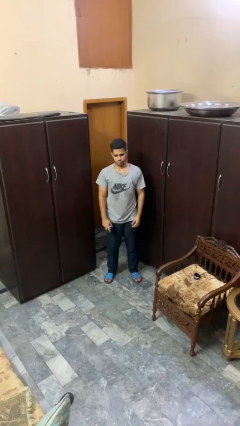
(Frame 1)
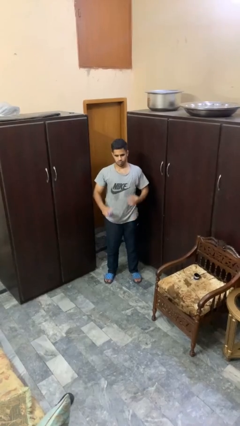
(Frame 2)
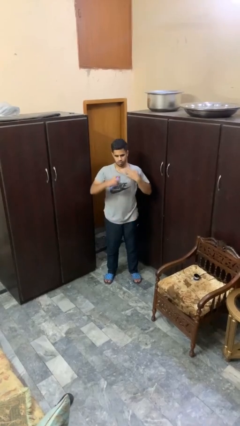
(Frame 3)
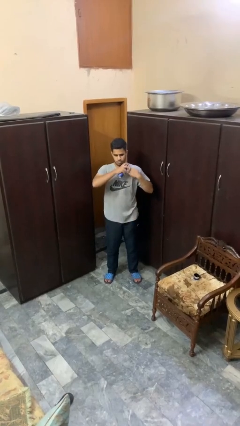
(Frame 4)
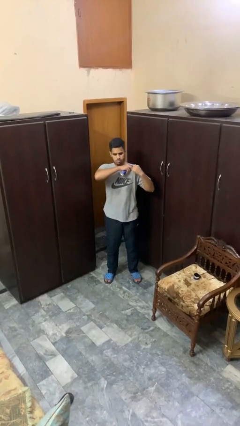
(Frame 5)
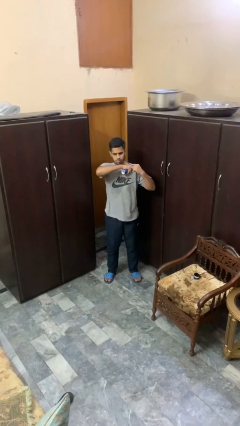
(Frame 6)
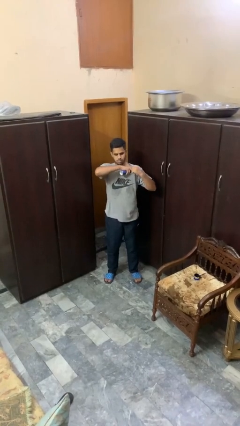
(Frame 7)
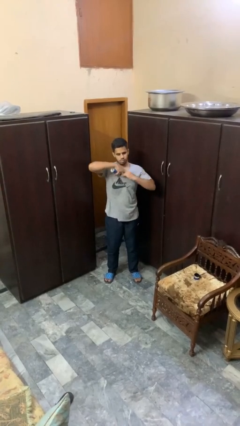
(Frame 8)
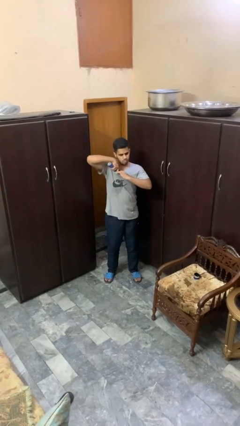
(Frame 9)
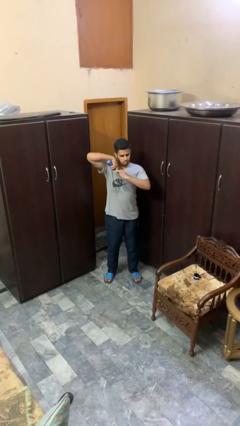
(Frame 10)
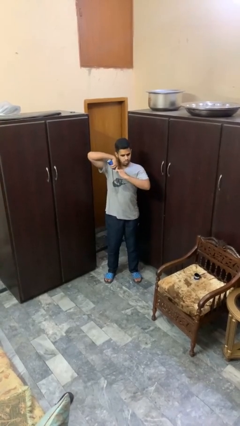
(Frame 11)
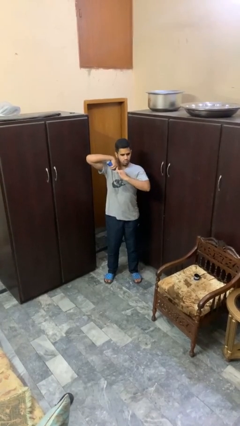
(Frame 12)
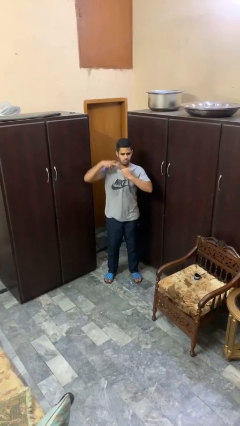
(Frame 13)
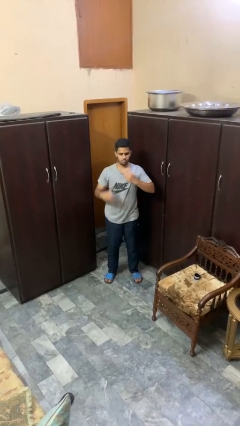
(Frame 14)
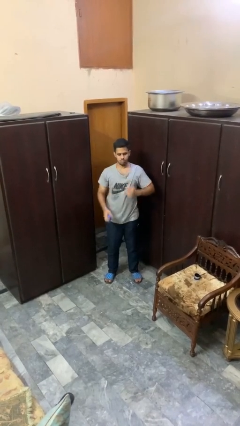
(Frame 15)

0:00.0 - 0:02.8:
person applies deodorant

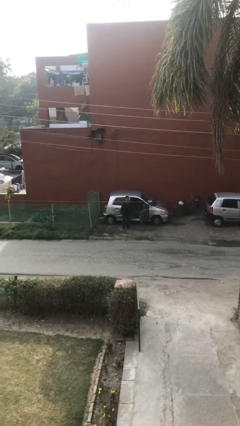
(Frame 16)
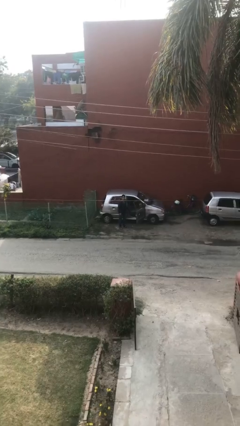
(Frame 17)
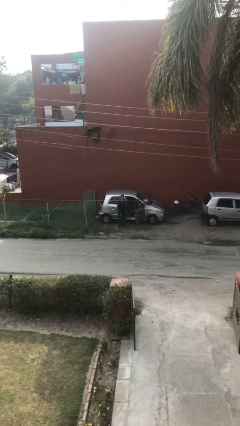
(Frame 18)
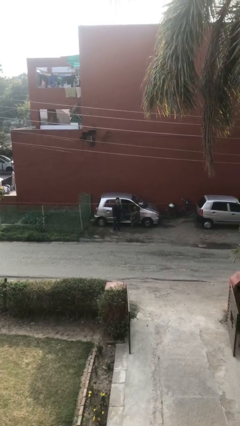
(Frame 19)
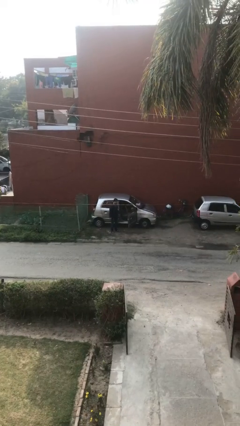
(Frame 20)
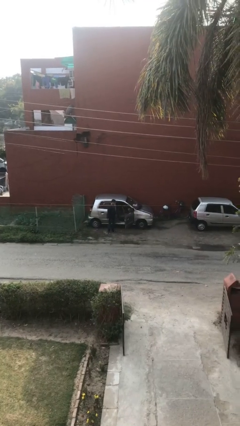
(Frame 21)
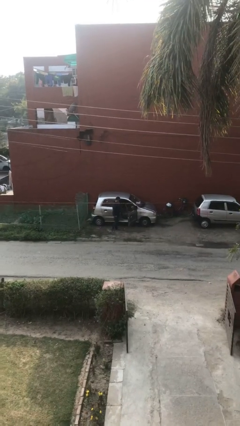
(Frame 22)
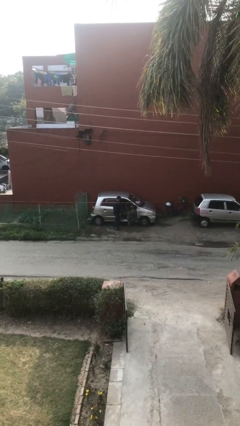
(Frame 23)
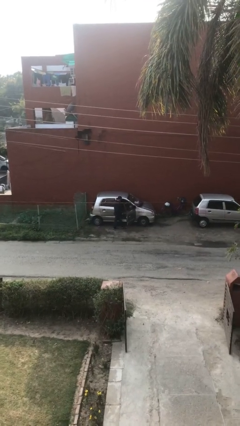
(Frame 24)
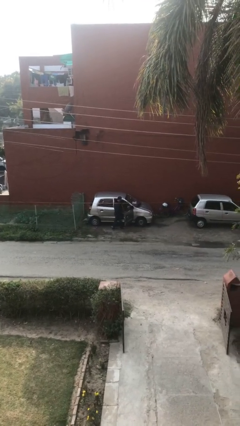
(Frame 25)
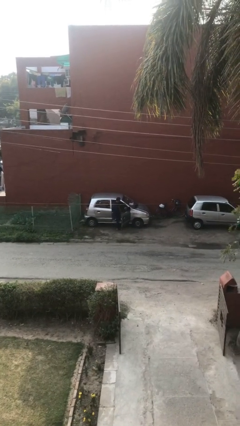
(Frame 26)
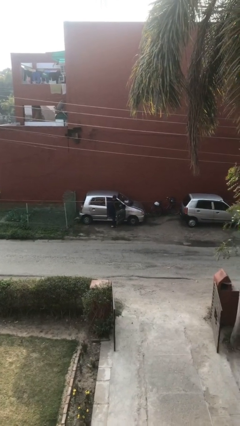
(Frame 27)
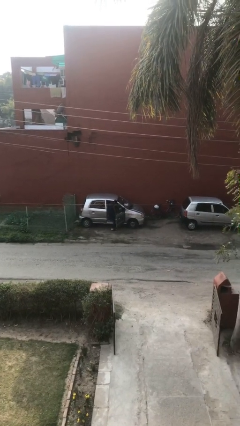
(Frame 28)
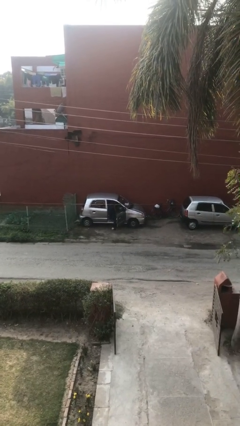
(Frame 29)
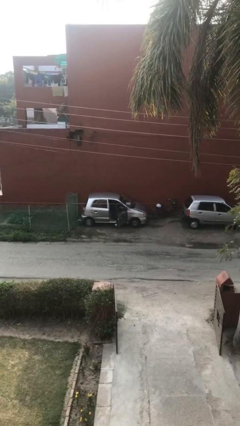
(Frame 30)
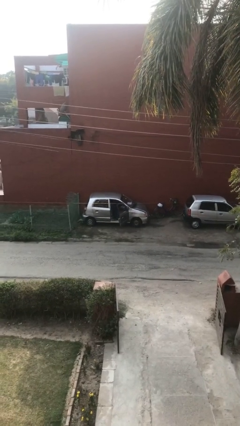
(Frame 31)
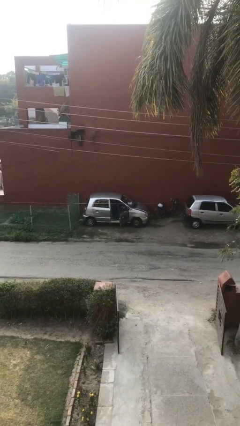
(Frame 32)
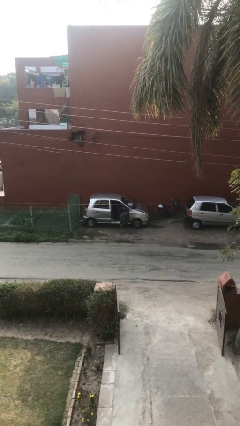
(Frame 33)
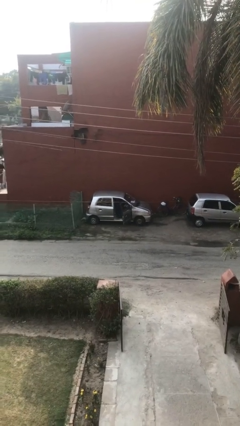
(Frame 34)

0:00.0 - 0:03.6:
person enters car

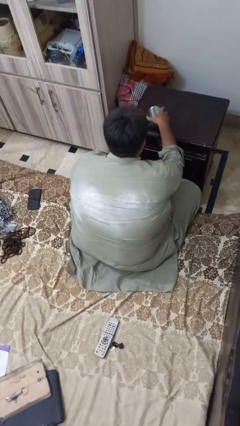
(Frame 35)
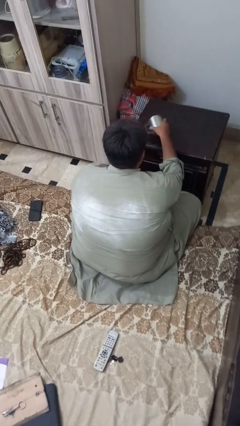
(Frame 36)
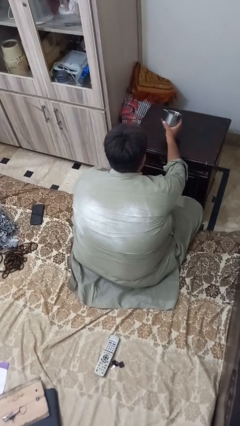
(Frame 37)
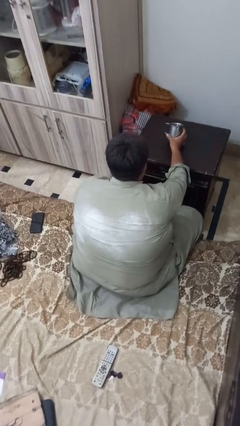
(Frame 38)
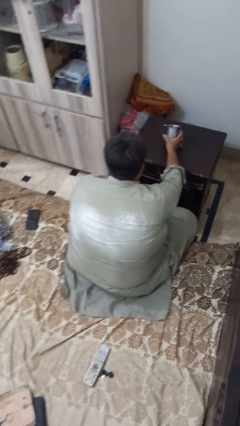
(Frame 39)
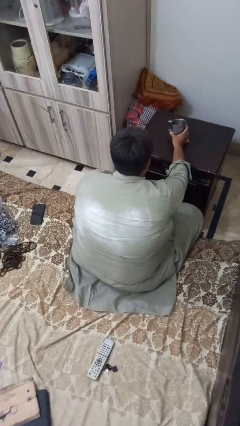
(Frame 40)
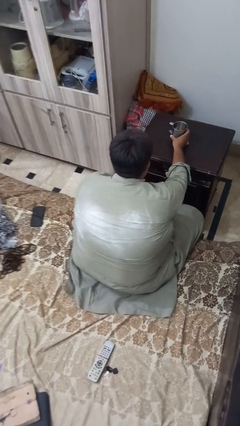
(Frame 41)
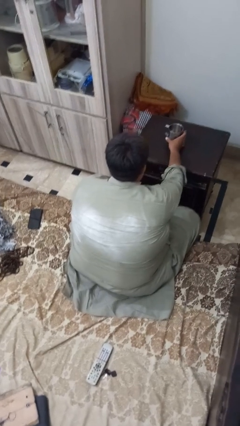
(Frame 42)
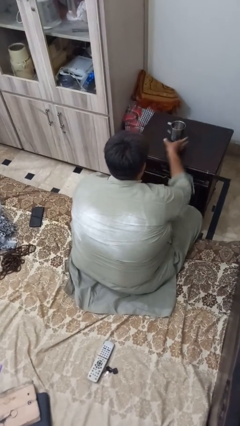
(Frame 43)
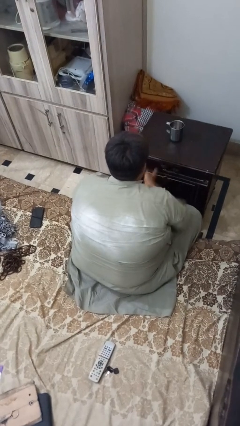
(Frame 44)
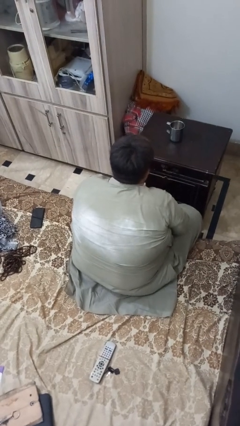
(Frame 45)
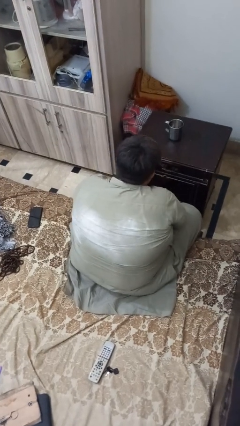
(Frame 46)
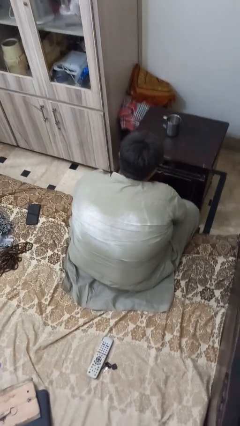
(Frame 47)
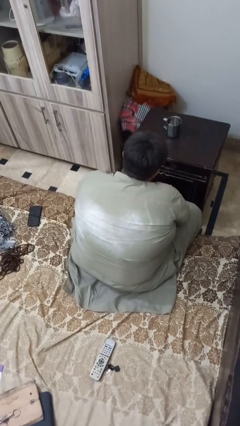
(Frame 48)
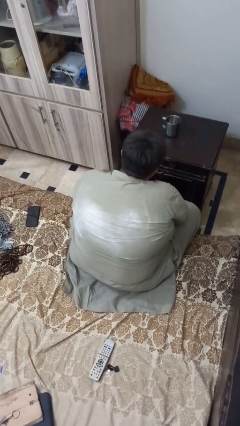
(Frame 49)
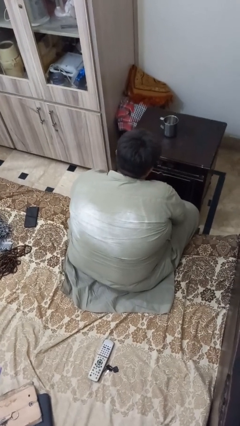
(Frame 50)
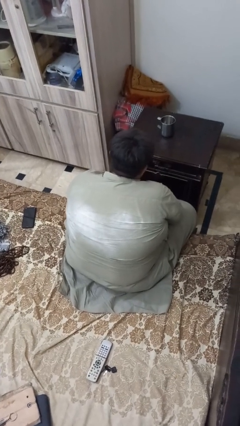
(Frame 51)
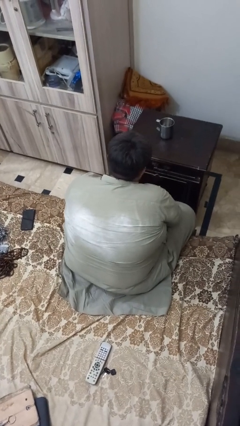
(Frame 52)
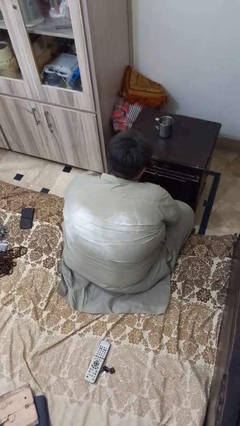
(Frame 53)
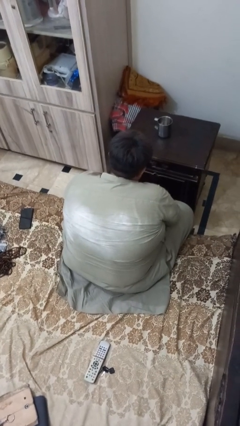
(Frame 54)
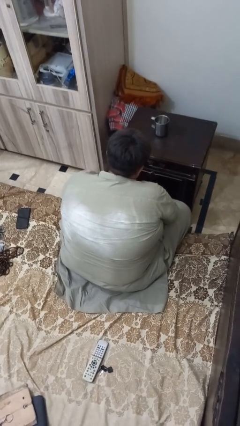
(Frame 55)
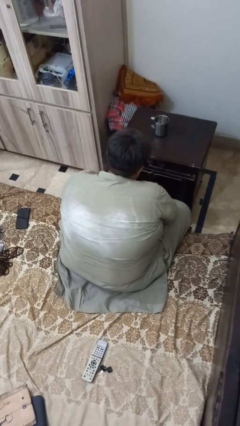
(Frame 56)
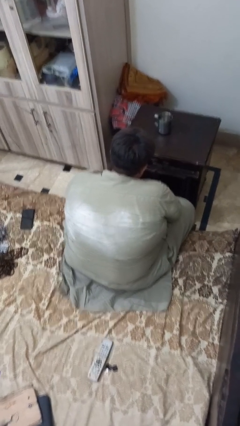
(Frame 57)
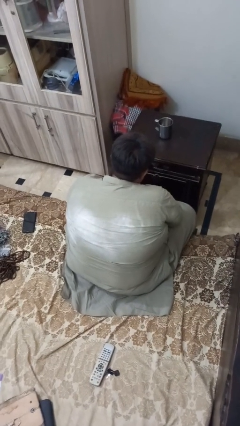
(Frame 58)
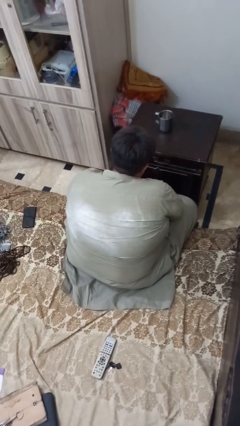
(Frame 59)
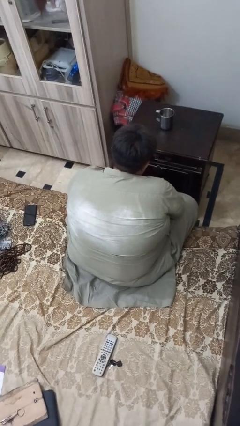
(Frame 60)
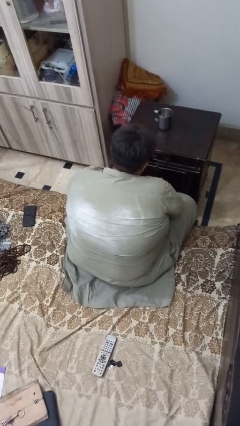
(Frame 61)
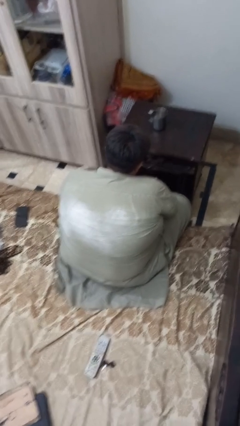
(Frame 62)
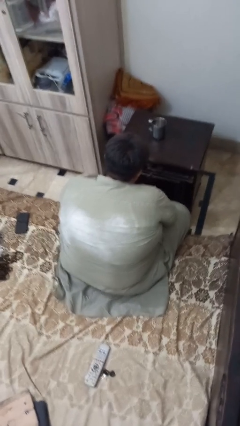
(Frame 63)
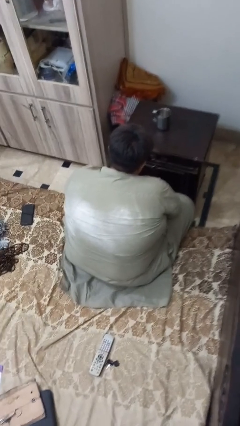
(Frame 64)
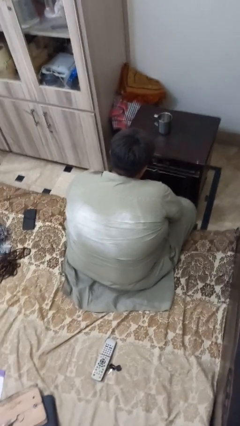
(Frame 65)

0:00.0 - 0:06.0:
person sets upright glass

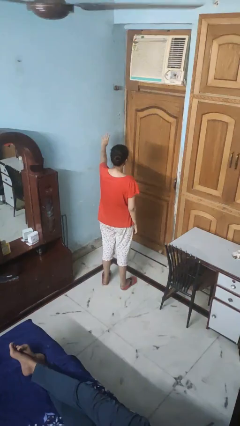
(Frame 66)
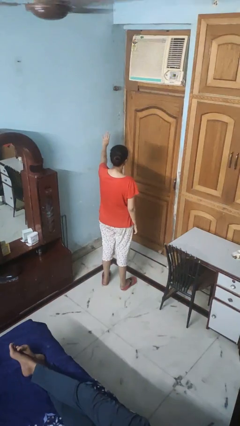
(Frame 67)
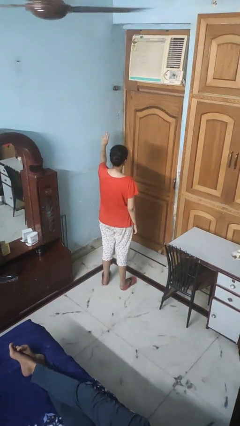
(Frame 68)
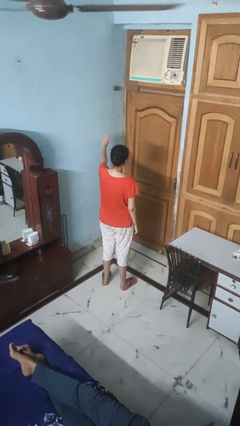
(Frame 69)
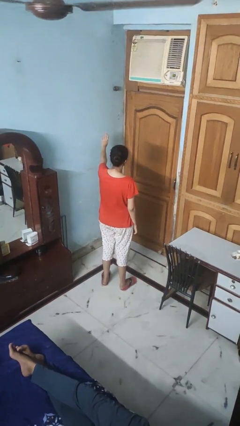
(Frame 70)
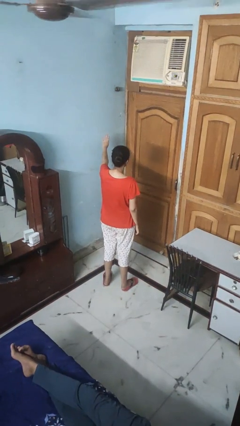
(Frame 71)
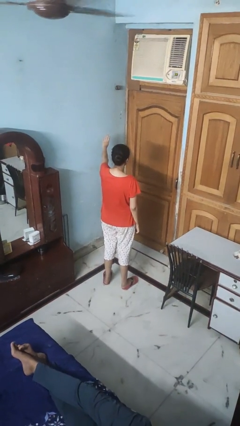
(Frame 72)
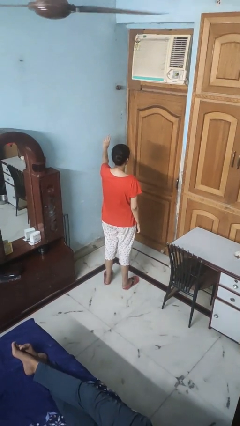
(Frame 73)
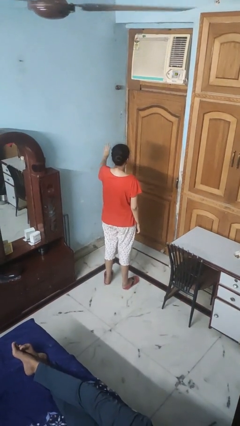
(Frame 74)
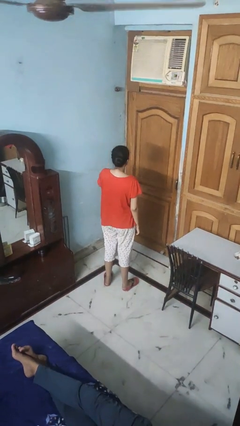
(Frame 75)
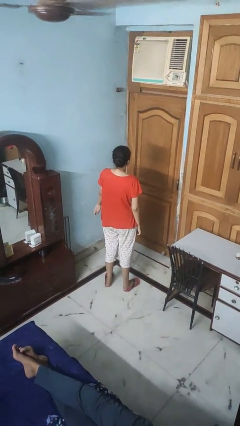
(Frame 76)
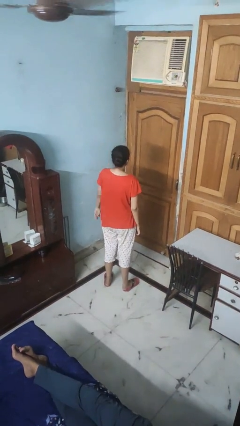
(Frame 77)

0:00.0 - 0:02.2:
person gestures number four

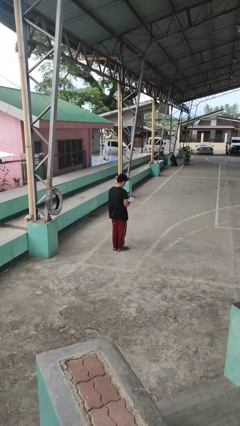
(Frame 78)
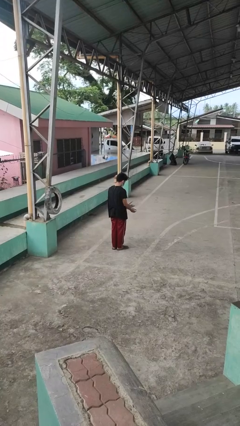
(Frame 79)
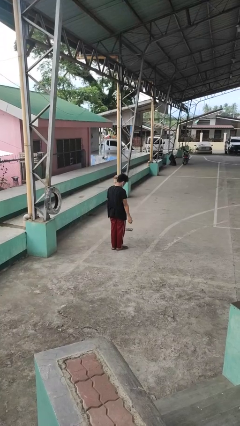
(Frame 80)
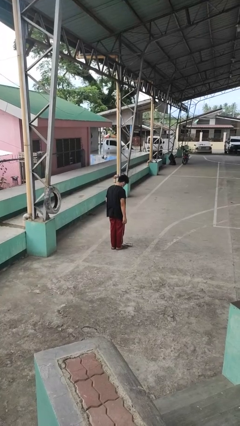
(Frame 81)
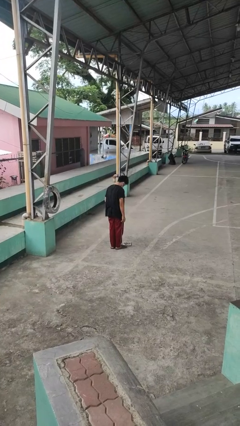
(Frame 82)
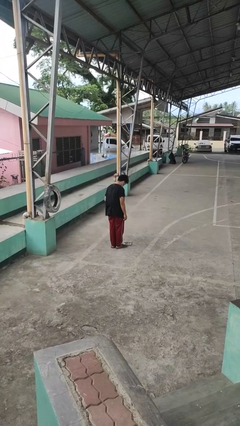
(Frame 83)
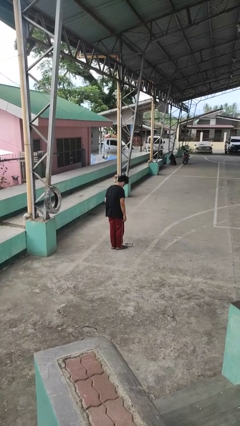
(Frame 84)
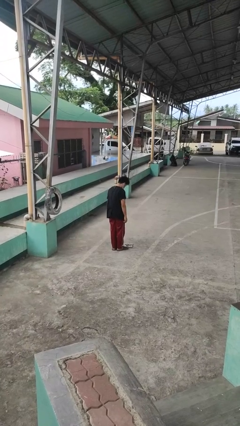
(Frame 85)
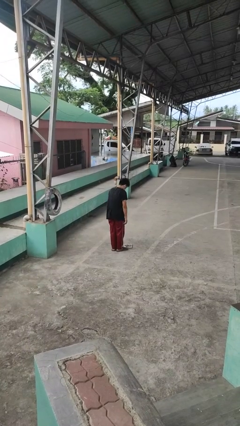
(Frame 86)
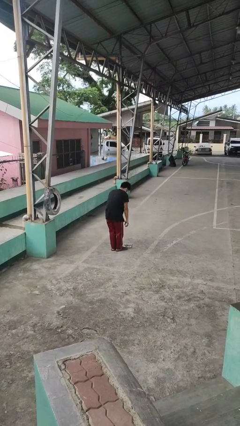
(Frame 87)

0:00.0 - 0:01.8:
person drops object

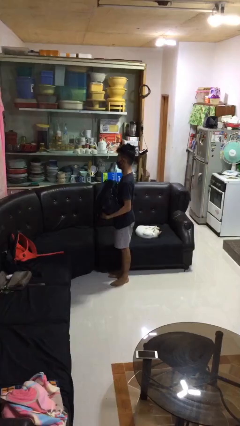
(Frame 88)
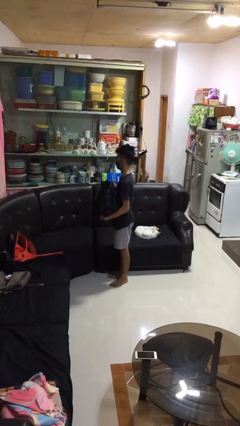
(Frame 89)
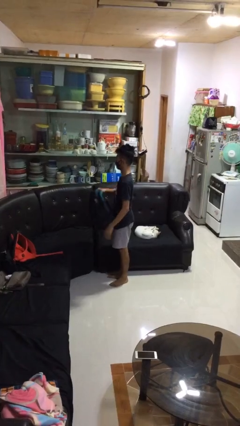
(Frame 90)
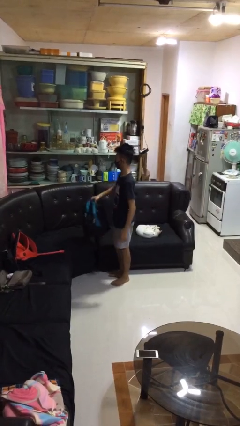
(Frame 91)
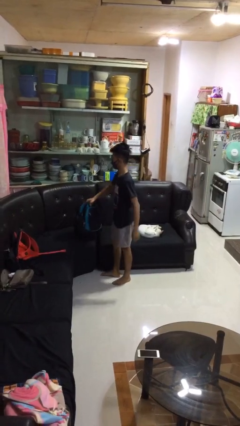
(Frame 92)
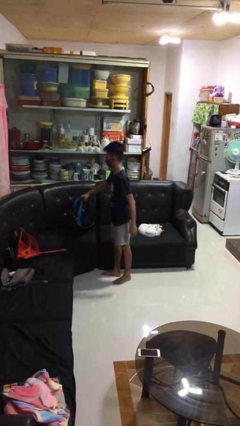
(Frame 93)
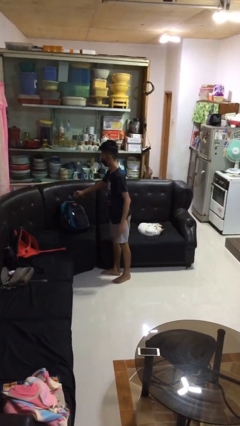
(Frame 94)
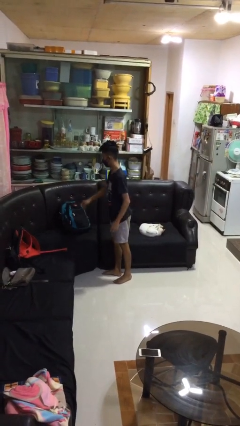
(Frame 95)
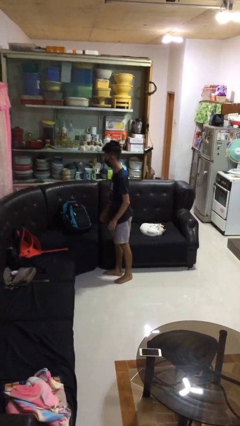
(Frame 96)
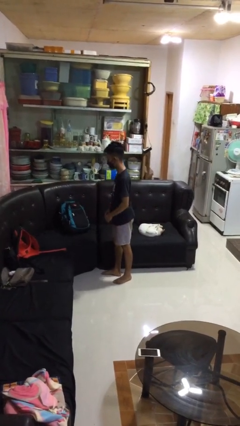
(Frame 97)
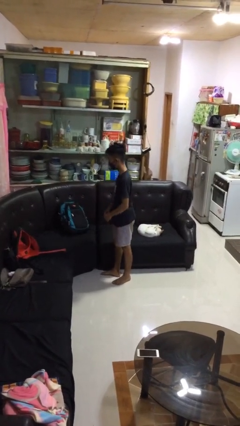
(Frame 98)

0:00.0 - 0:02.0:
person puts down object on couch
